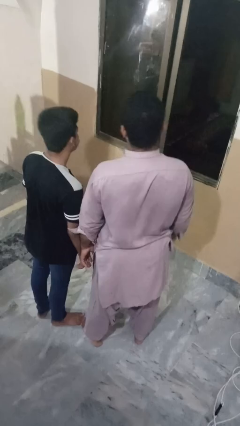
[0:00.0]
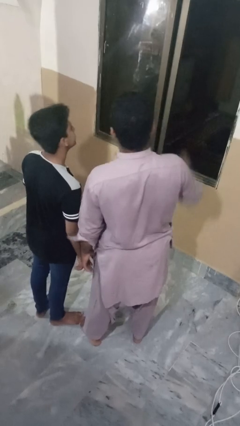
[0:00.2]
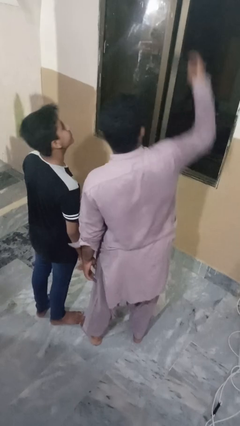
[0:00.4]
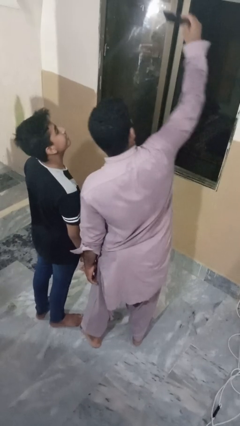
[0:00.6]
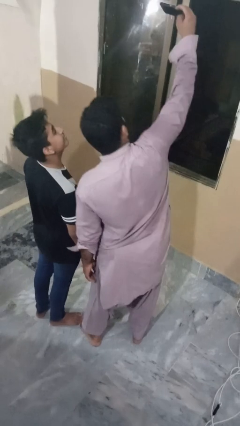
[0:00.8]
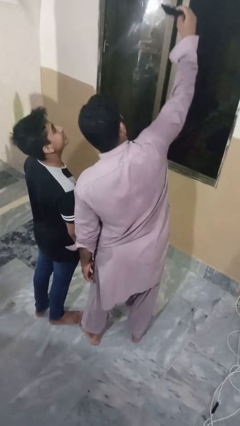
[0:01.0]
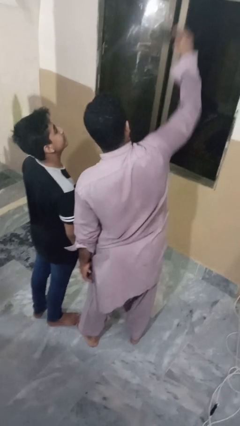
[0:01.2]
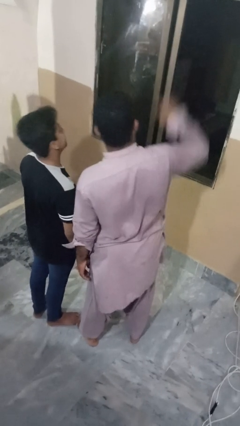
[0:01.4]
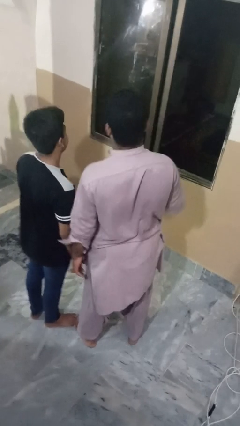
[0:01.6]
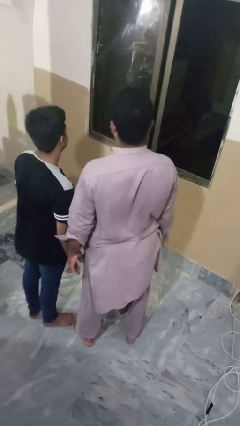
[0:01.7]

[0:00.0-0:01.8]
person takes selfie with person

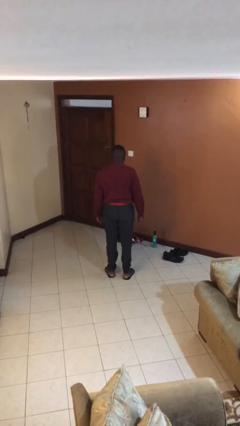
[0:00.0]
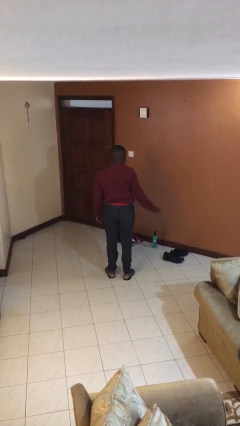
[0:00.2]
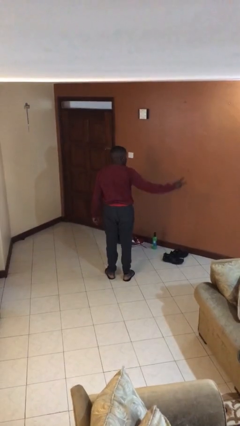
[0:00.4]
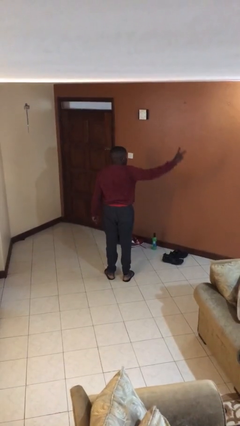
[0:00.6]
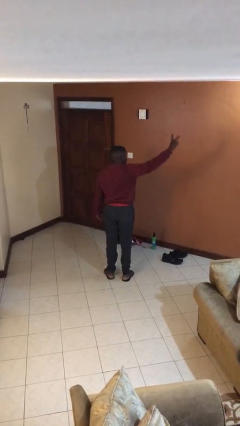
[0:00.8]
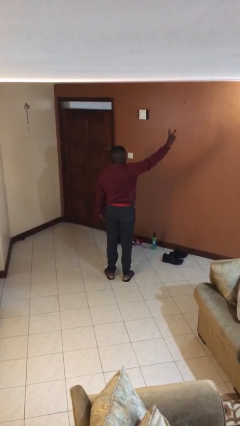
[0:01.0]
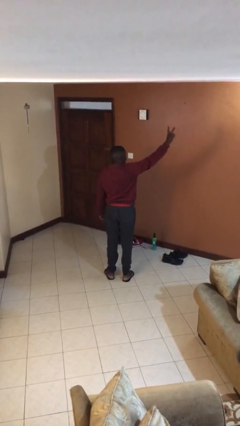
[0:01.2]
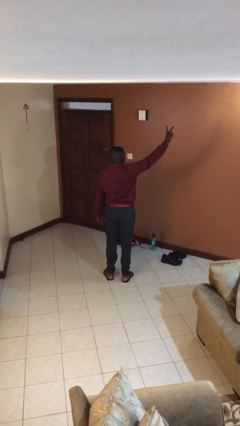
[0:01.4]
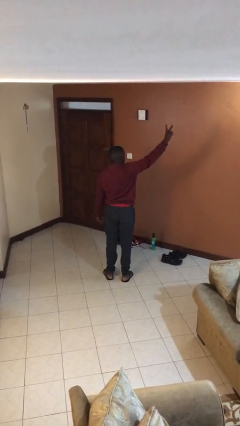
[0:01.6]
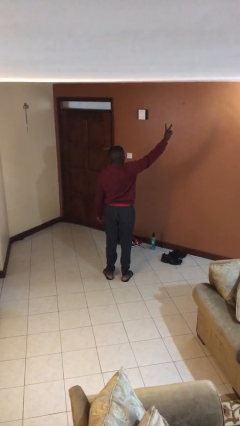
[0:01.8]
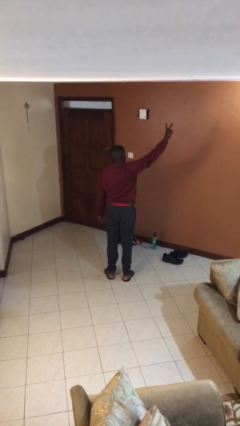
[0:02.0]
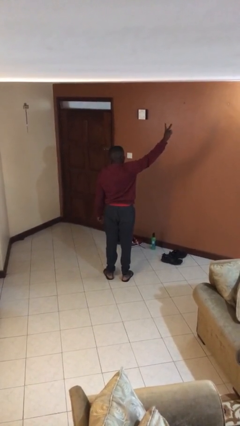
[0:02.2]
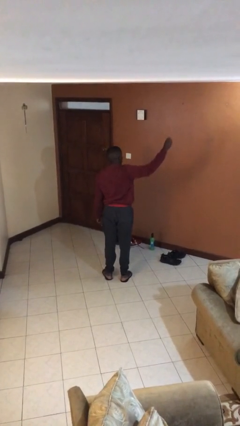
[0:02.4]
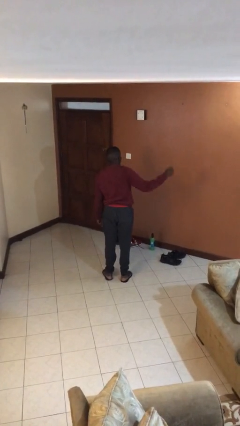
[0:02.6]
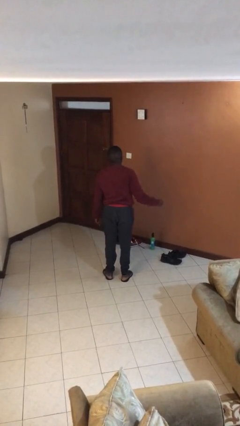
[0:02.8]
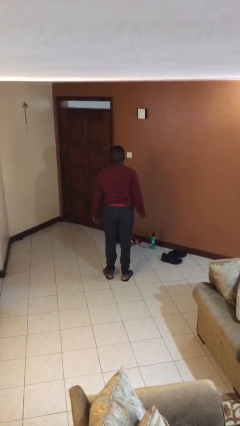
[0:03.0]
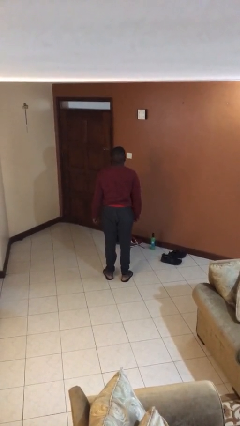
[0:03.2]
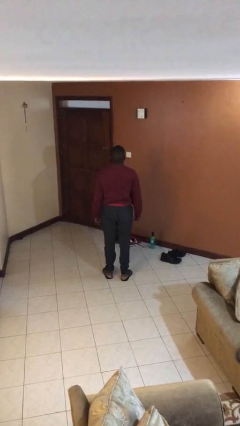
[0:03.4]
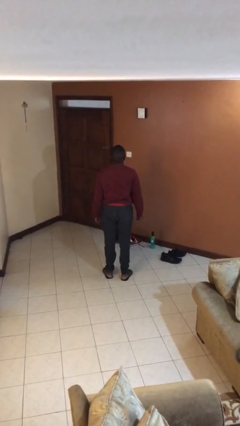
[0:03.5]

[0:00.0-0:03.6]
person gestures peace

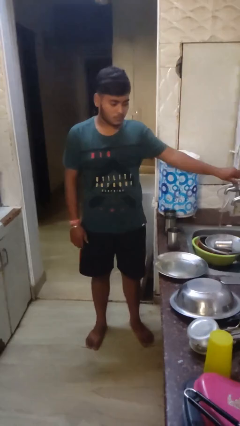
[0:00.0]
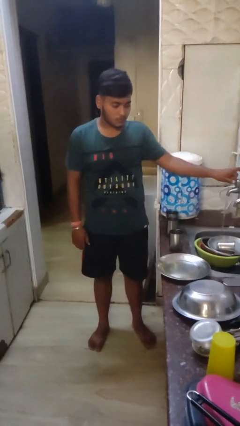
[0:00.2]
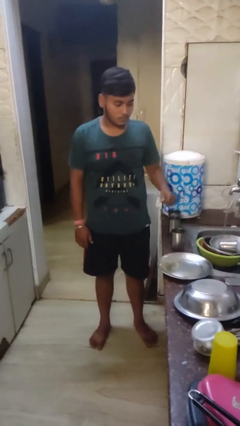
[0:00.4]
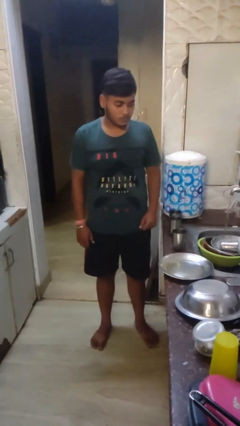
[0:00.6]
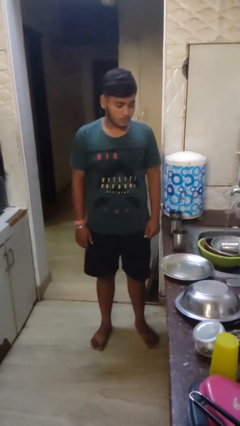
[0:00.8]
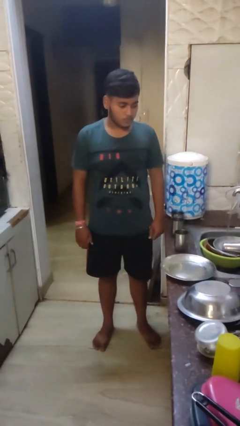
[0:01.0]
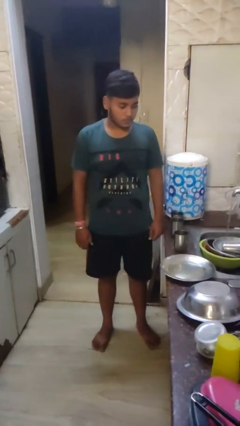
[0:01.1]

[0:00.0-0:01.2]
person turns on faucet

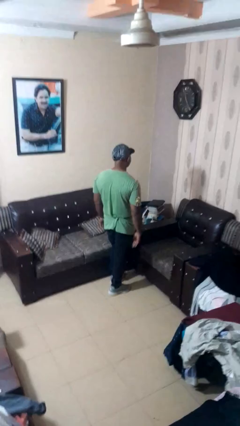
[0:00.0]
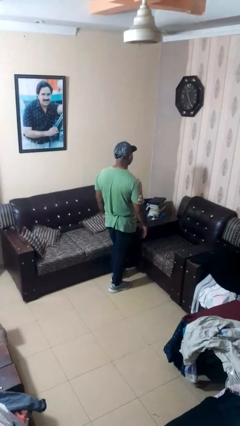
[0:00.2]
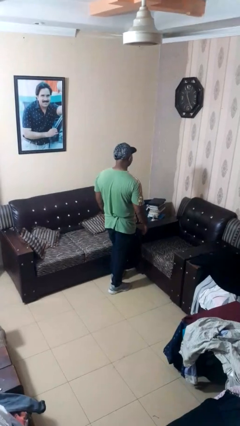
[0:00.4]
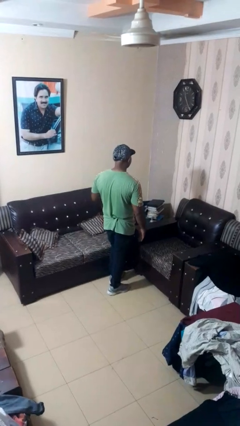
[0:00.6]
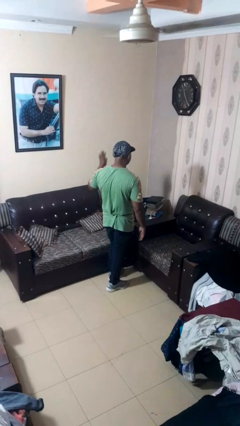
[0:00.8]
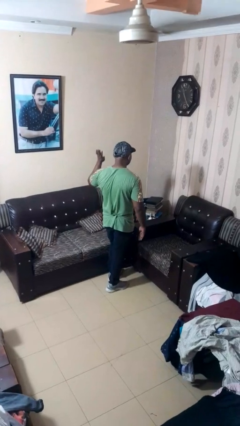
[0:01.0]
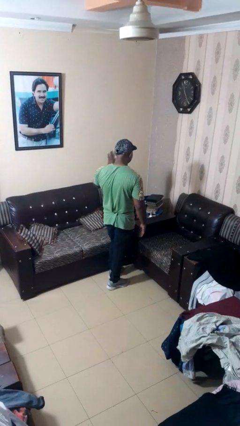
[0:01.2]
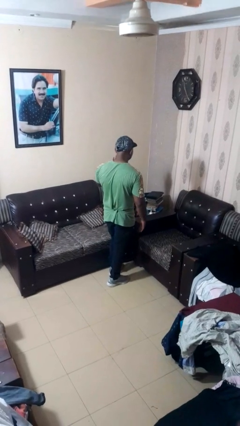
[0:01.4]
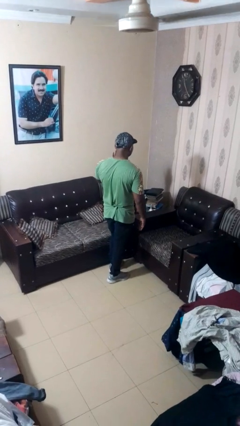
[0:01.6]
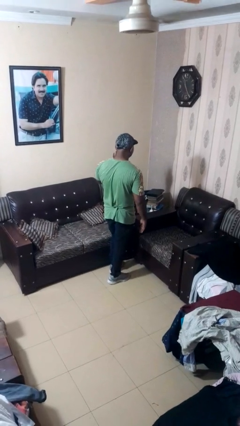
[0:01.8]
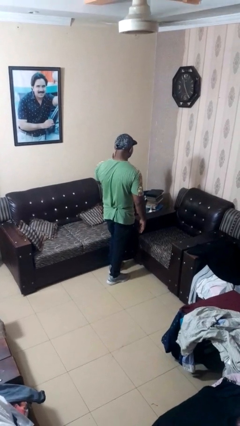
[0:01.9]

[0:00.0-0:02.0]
person gestures stop

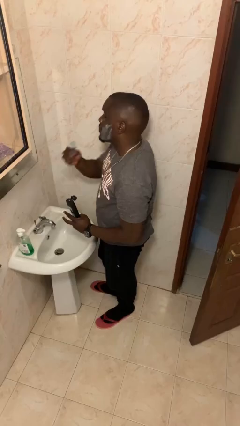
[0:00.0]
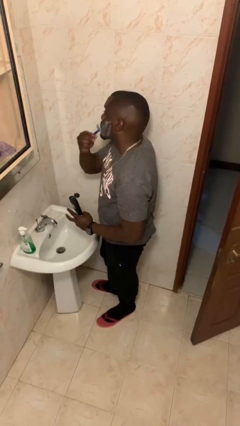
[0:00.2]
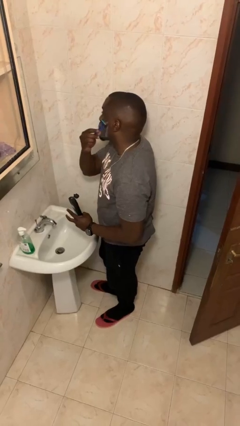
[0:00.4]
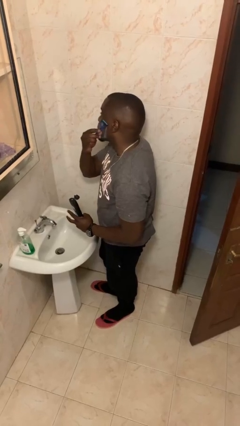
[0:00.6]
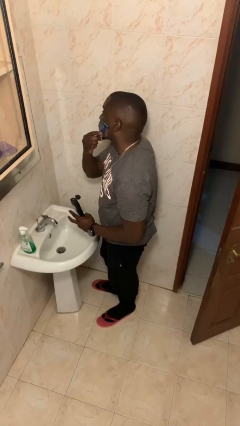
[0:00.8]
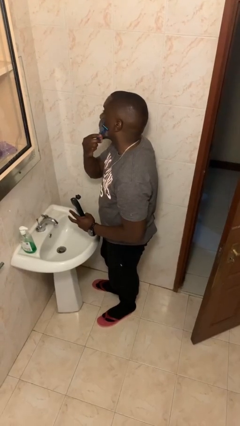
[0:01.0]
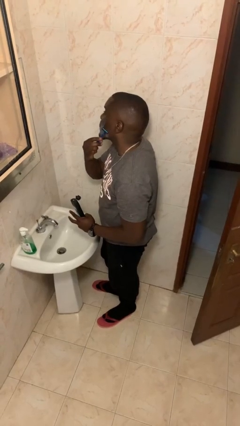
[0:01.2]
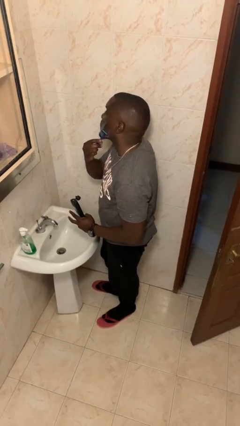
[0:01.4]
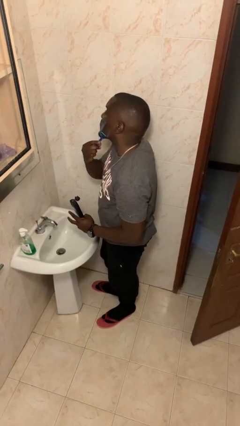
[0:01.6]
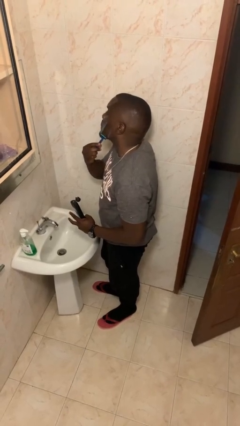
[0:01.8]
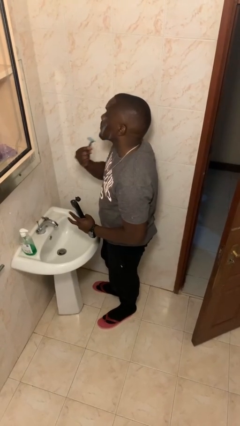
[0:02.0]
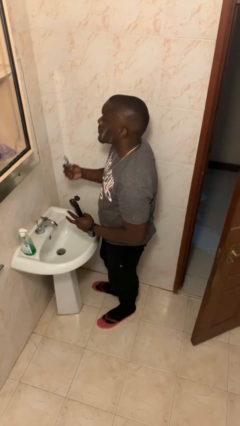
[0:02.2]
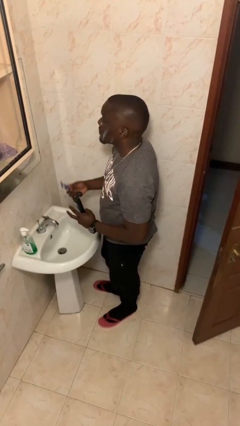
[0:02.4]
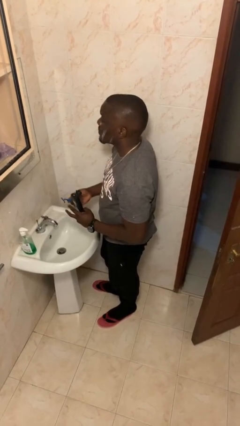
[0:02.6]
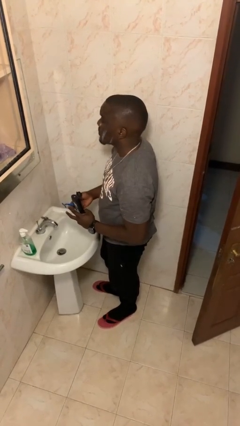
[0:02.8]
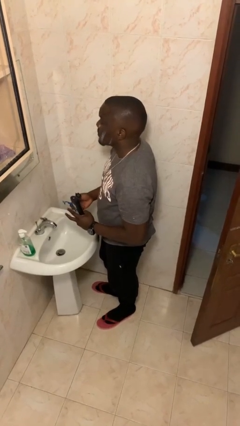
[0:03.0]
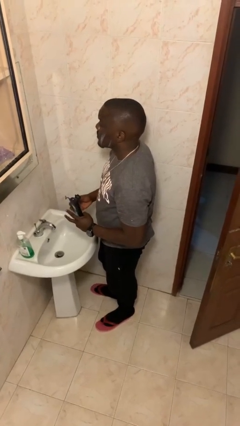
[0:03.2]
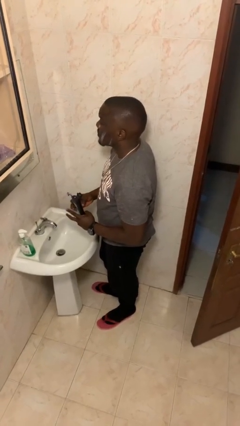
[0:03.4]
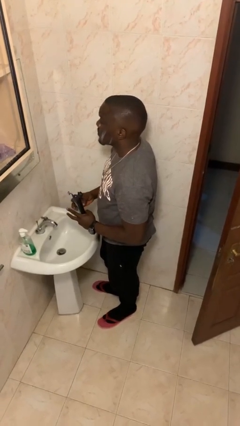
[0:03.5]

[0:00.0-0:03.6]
person shaves face

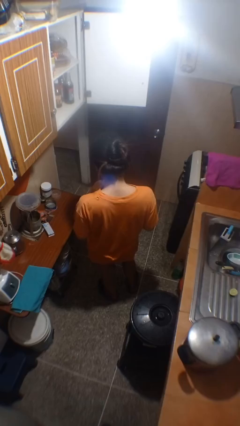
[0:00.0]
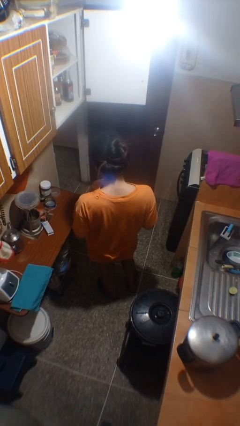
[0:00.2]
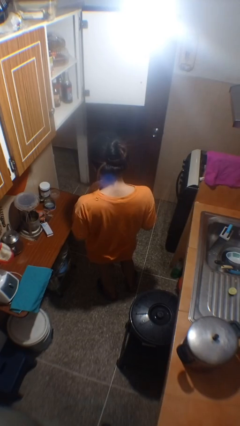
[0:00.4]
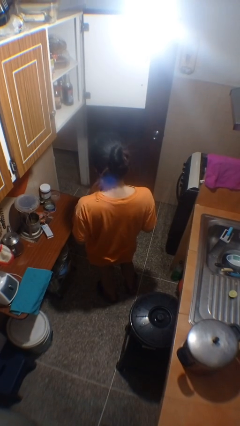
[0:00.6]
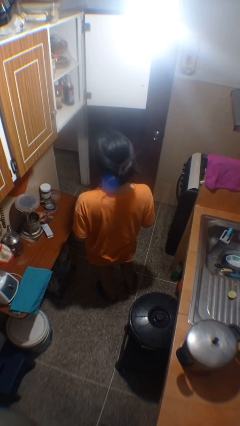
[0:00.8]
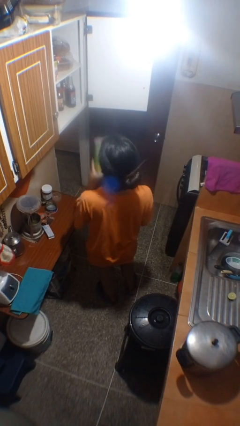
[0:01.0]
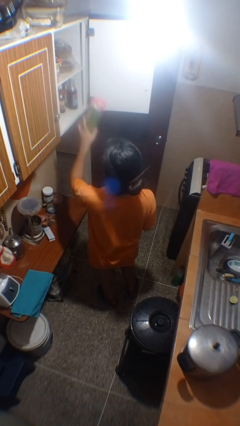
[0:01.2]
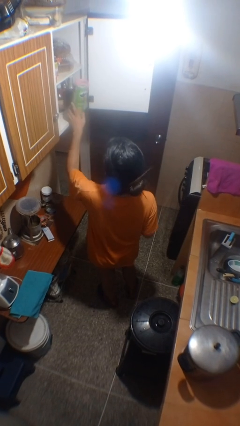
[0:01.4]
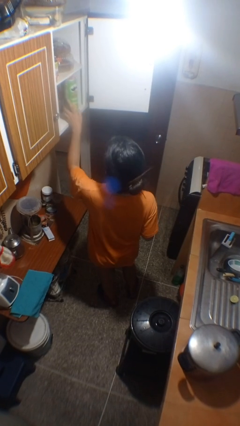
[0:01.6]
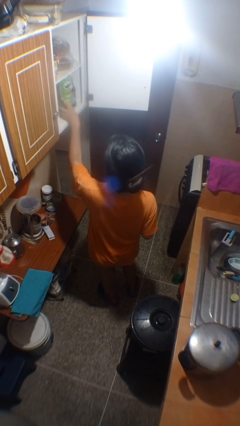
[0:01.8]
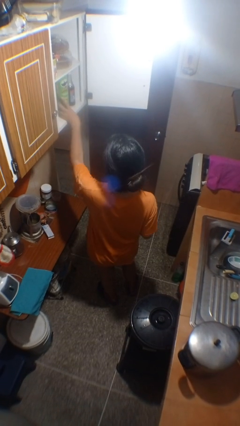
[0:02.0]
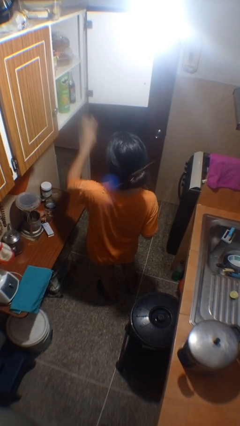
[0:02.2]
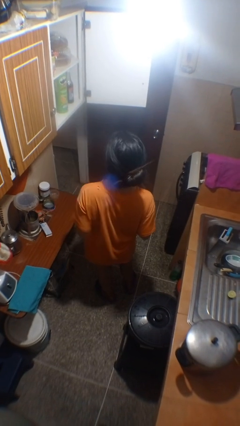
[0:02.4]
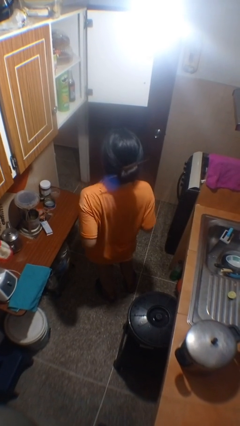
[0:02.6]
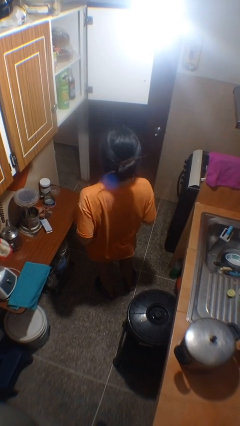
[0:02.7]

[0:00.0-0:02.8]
person puts object in cabinet

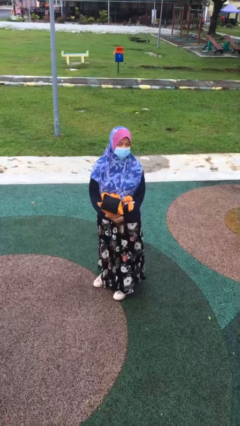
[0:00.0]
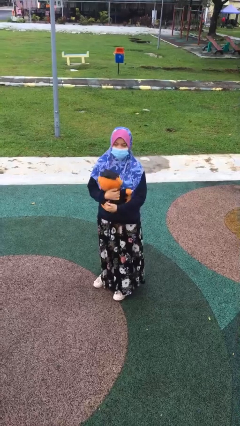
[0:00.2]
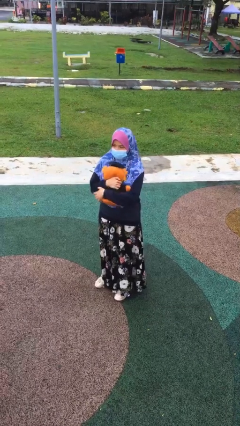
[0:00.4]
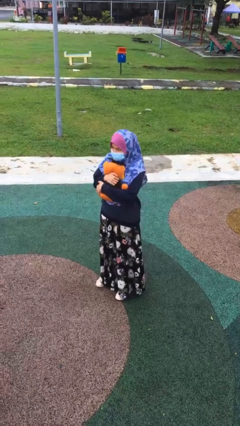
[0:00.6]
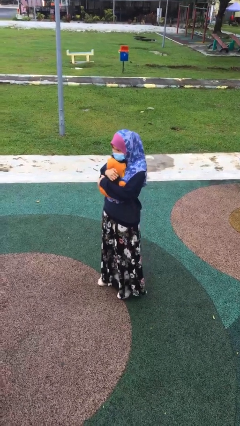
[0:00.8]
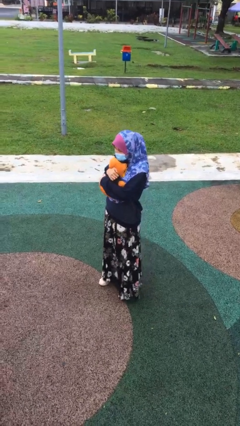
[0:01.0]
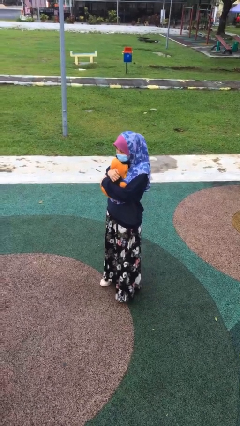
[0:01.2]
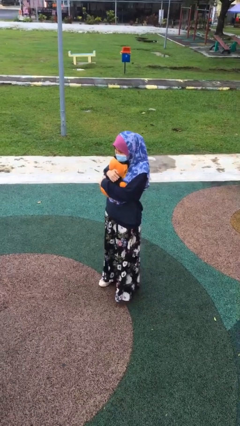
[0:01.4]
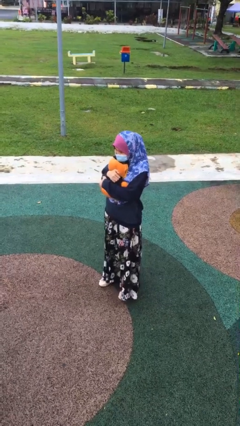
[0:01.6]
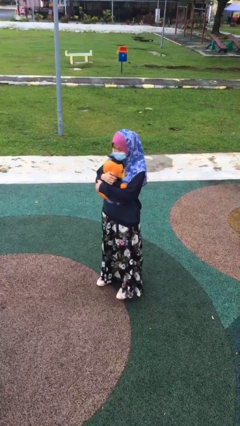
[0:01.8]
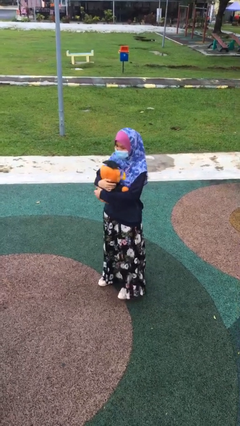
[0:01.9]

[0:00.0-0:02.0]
person hugs stuffed animal
